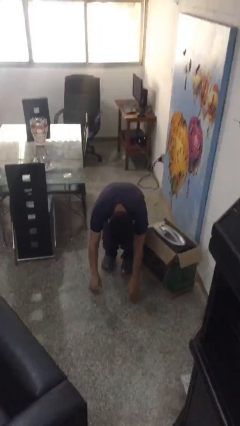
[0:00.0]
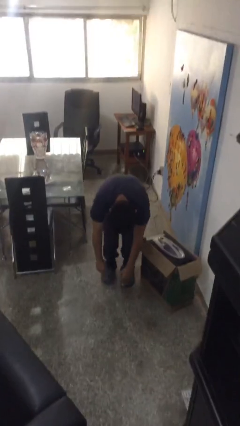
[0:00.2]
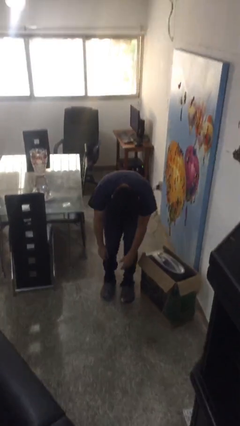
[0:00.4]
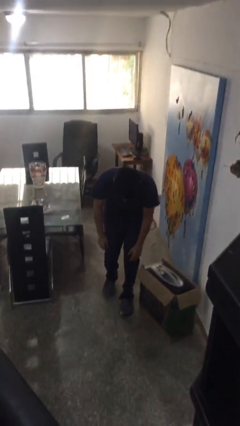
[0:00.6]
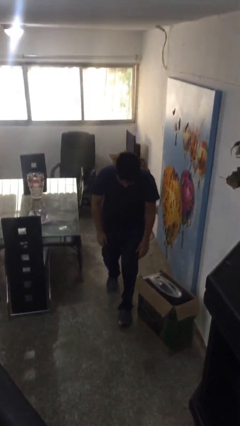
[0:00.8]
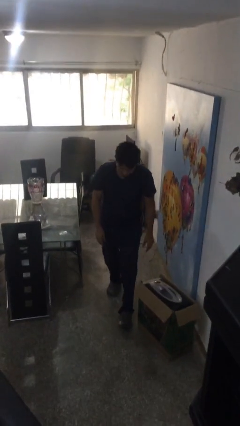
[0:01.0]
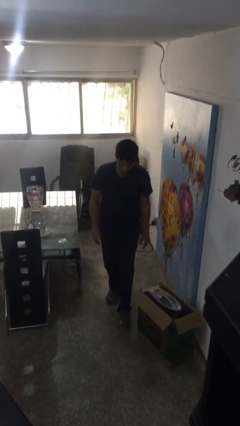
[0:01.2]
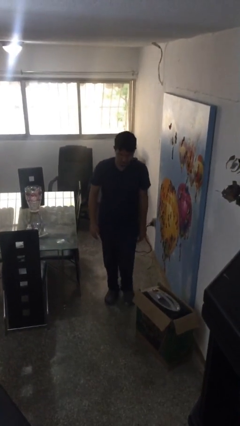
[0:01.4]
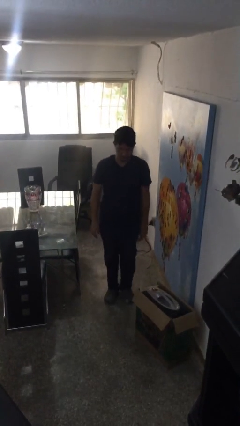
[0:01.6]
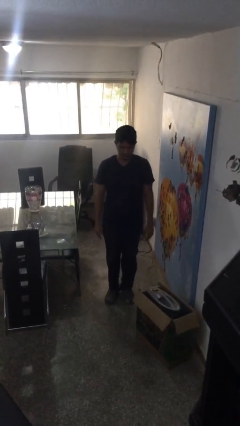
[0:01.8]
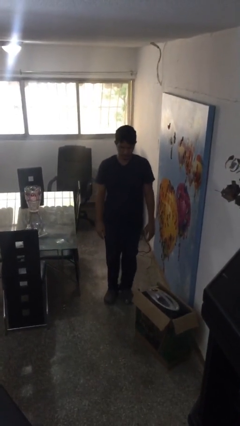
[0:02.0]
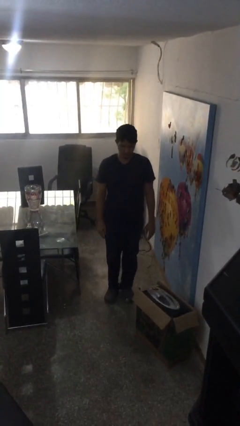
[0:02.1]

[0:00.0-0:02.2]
person stands up from floor

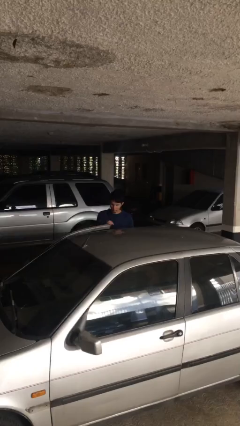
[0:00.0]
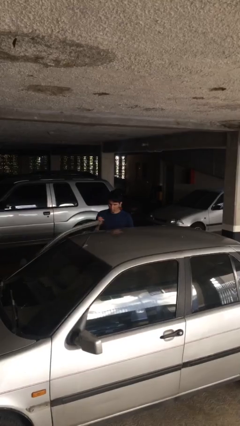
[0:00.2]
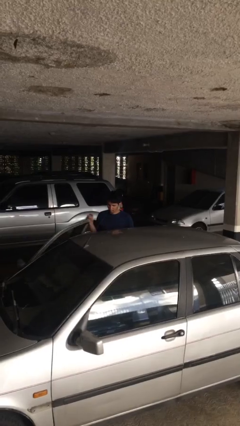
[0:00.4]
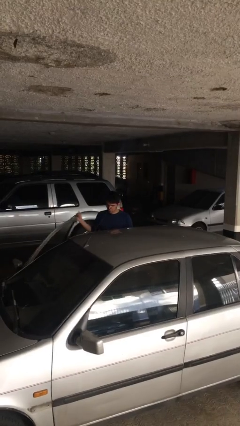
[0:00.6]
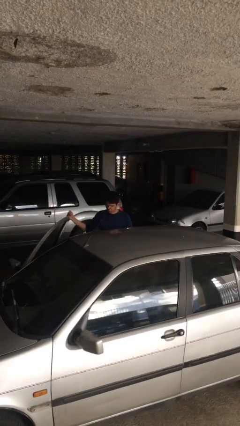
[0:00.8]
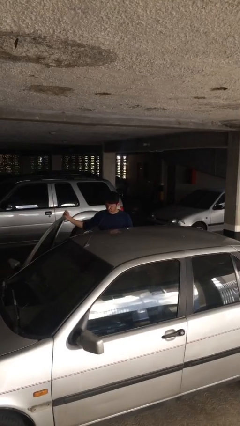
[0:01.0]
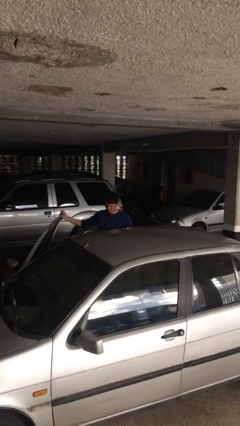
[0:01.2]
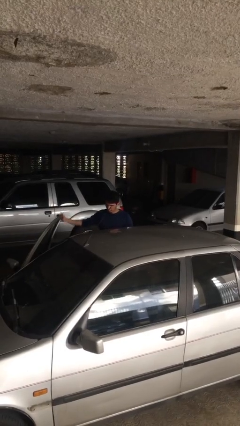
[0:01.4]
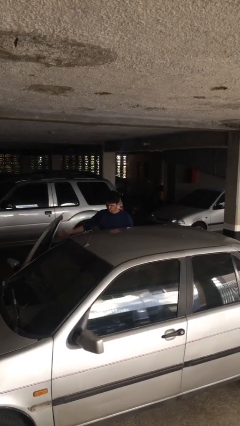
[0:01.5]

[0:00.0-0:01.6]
person opens car door

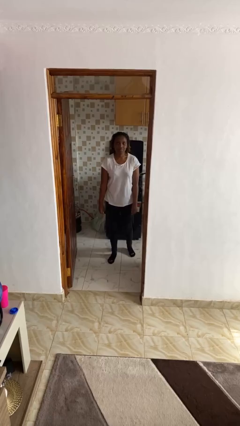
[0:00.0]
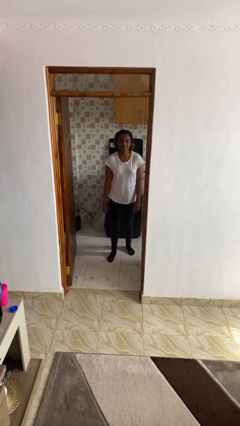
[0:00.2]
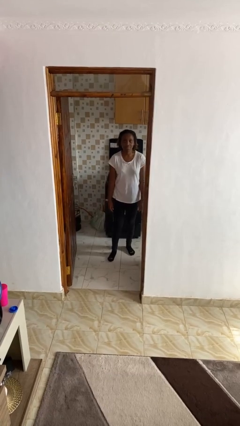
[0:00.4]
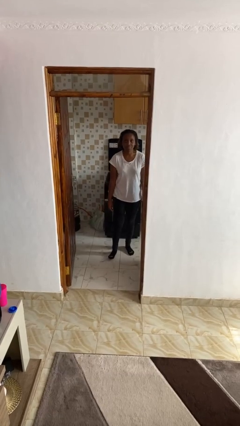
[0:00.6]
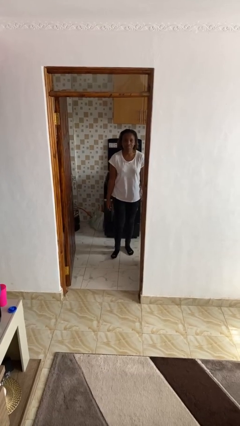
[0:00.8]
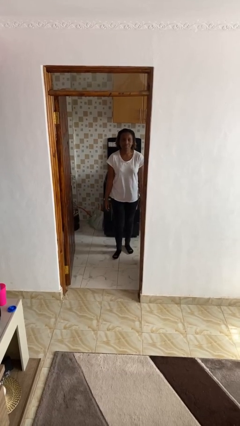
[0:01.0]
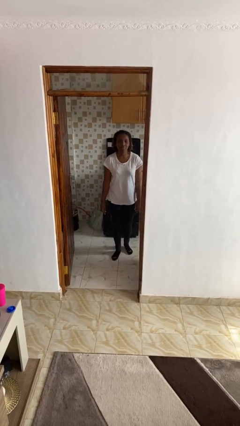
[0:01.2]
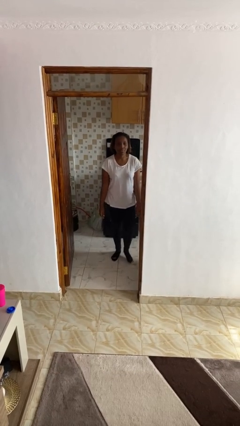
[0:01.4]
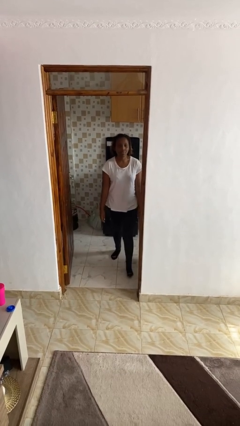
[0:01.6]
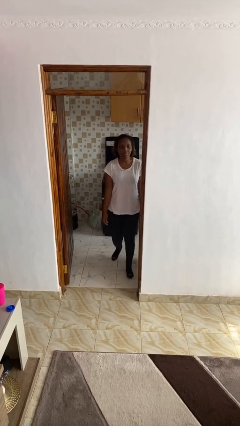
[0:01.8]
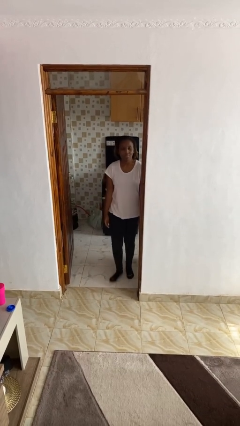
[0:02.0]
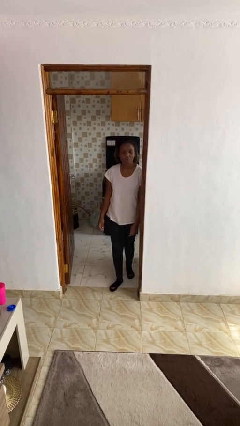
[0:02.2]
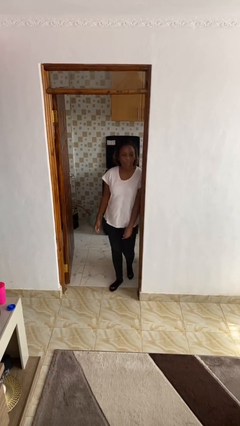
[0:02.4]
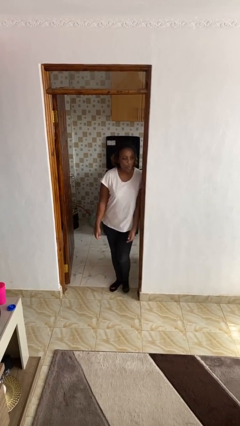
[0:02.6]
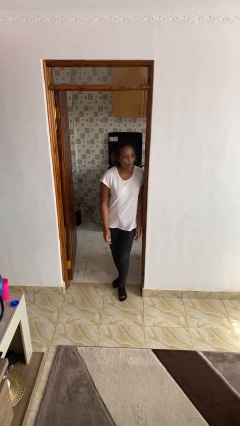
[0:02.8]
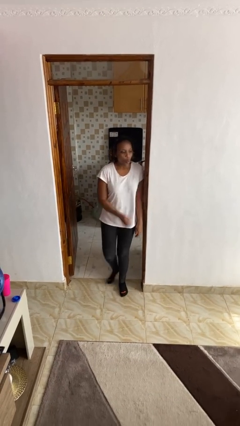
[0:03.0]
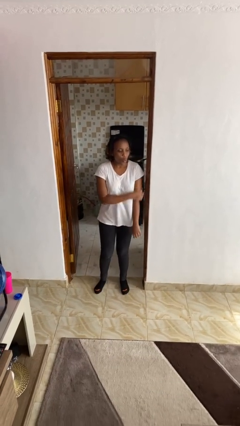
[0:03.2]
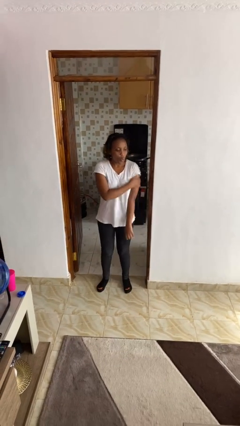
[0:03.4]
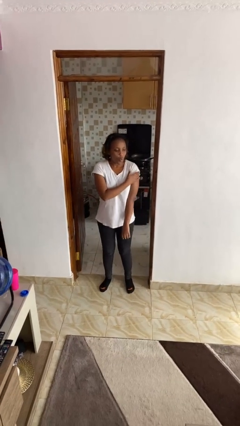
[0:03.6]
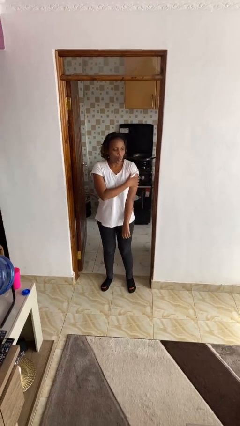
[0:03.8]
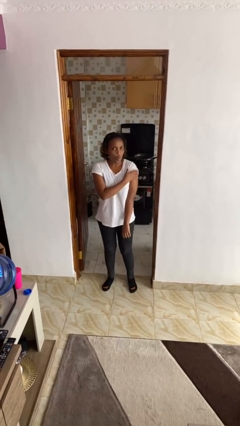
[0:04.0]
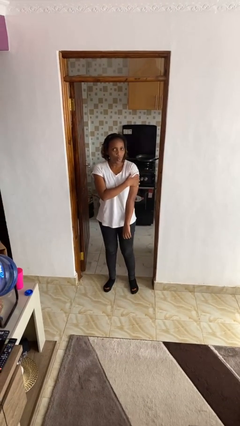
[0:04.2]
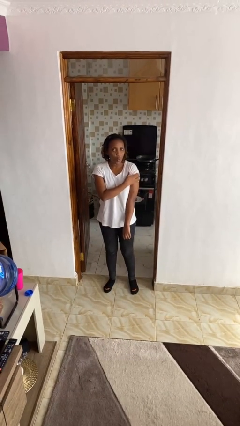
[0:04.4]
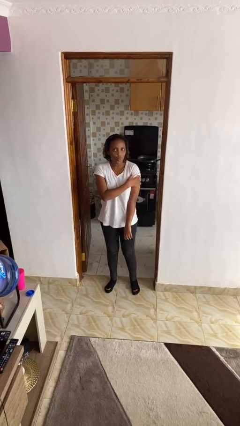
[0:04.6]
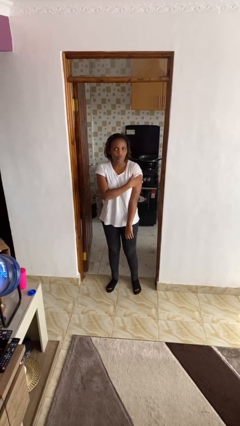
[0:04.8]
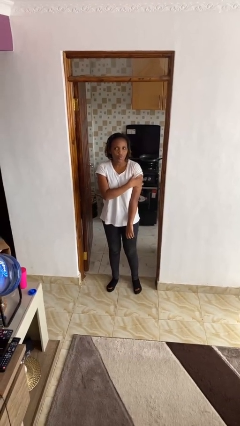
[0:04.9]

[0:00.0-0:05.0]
person bumps into wall

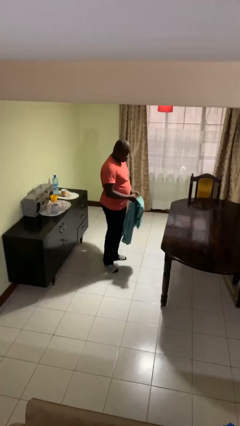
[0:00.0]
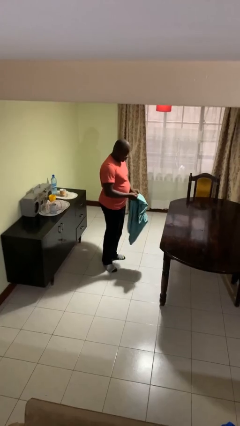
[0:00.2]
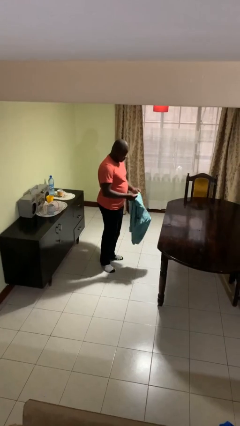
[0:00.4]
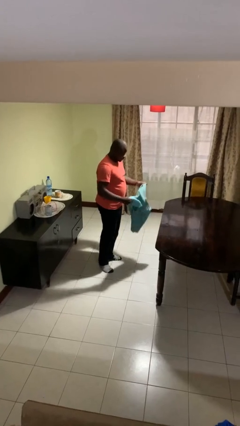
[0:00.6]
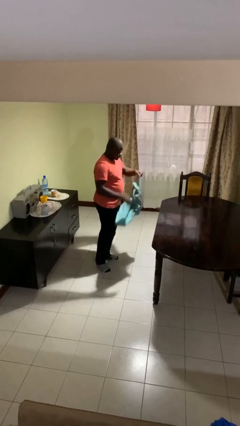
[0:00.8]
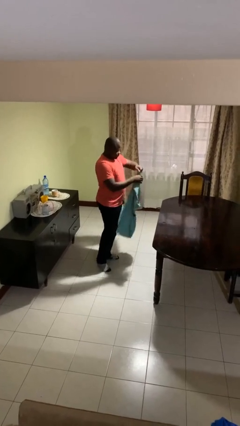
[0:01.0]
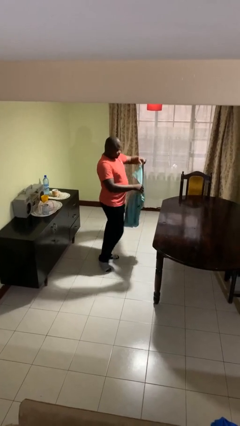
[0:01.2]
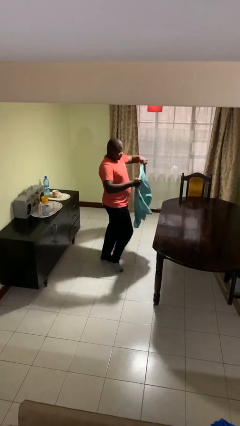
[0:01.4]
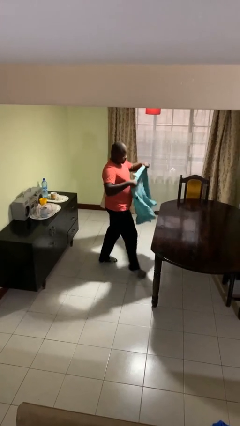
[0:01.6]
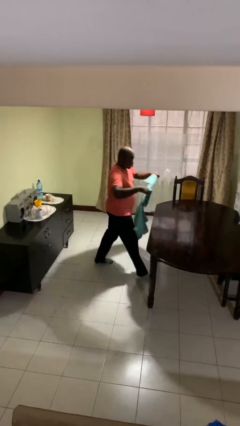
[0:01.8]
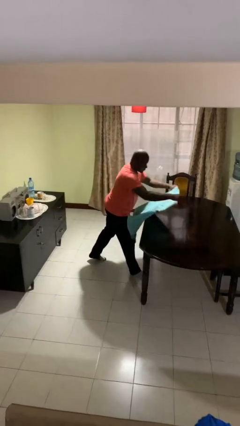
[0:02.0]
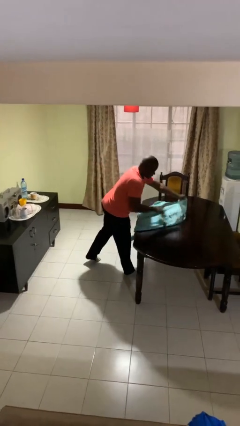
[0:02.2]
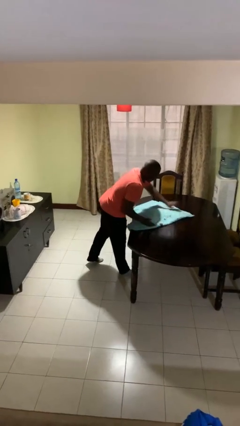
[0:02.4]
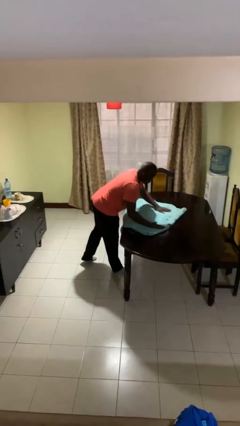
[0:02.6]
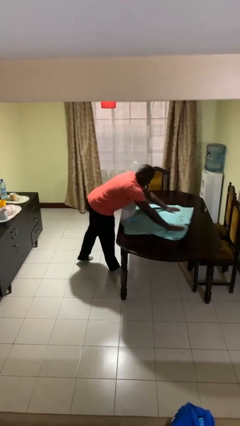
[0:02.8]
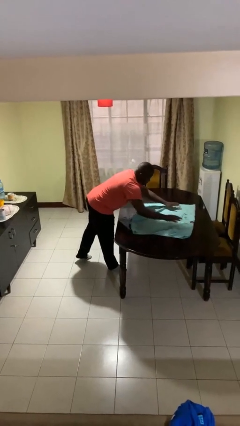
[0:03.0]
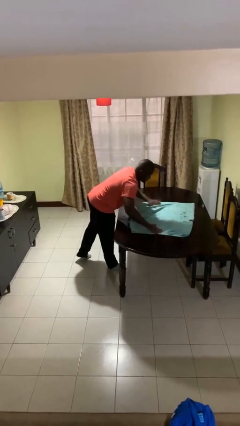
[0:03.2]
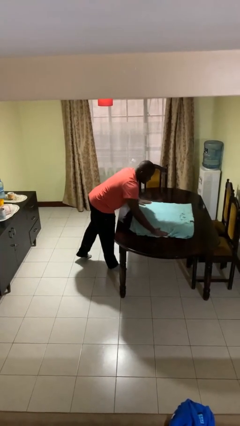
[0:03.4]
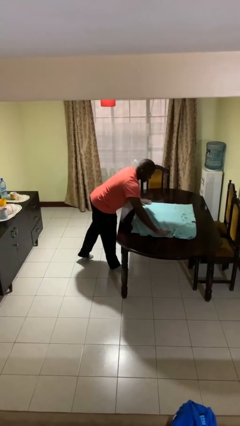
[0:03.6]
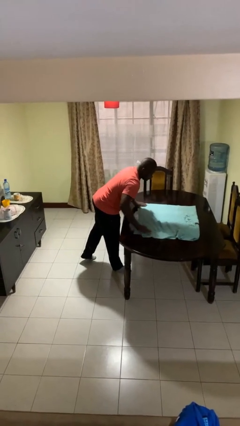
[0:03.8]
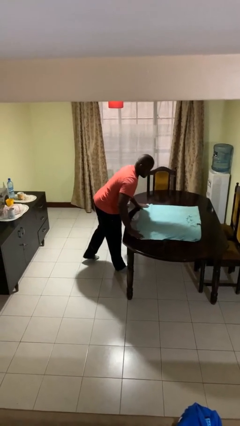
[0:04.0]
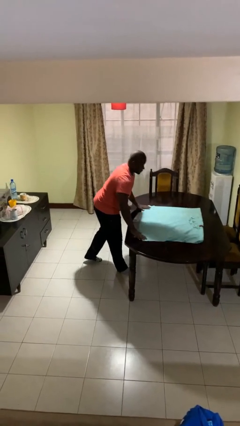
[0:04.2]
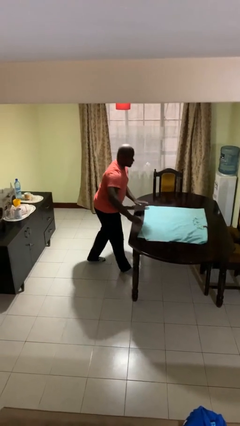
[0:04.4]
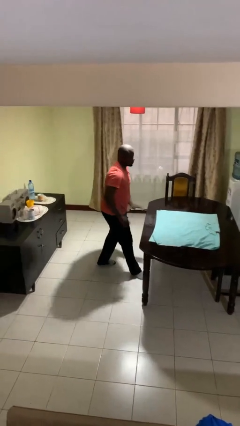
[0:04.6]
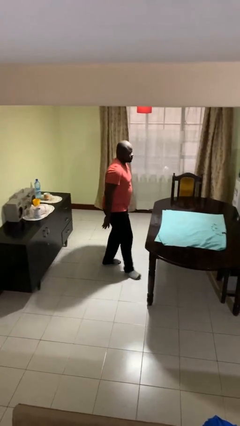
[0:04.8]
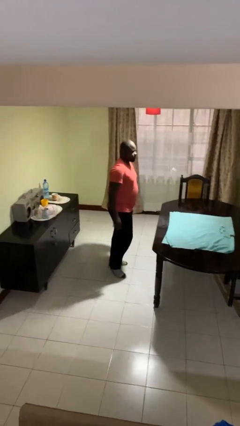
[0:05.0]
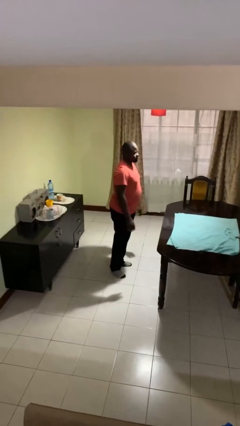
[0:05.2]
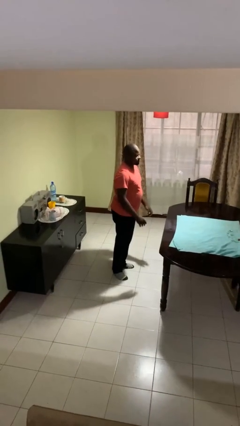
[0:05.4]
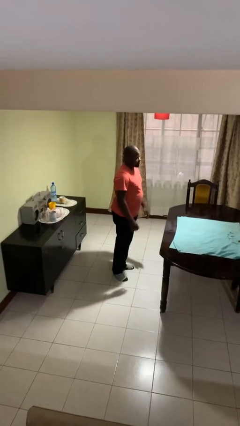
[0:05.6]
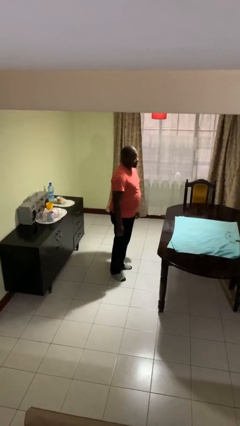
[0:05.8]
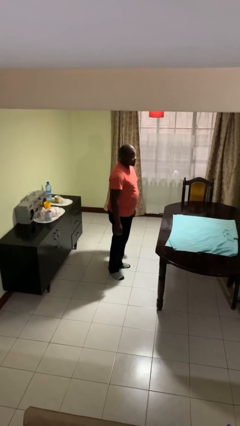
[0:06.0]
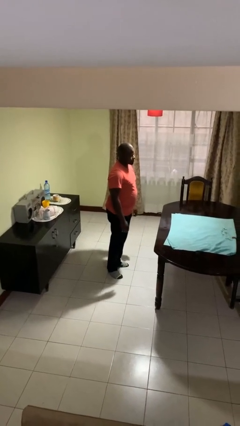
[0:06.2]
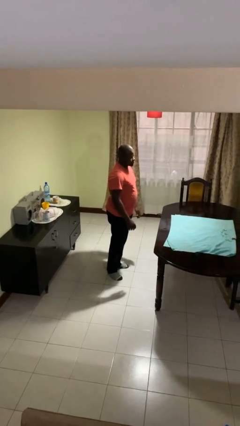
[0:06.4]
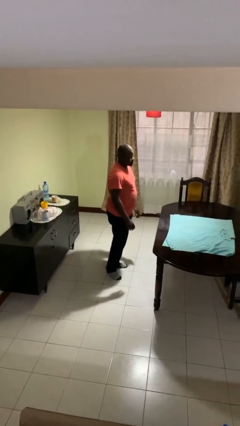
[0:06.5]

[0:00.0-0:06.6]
person spreads tablecloth

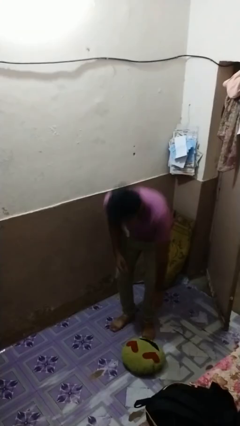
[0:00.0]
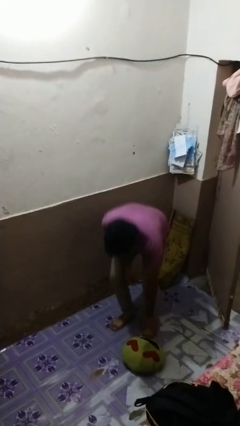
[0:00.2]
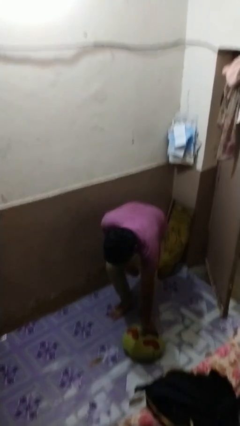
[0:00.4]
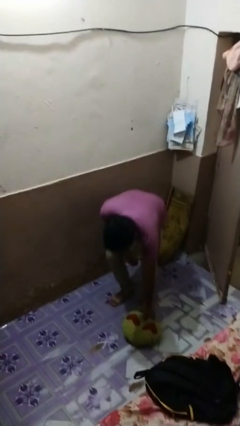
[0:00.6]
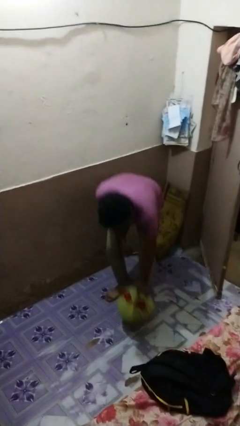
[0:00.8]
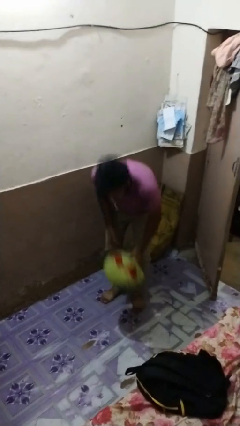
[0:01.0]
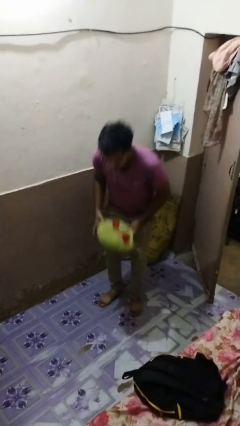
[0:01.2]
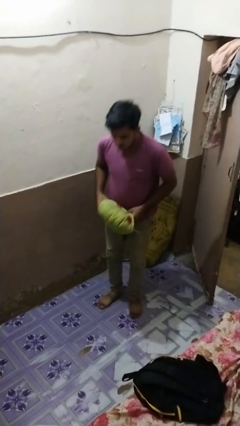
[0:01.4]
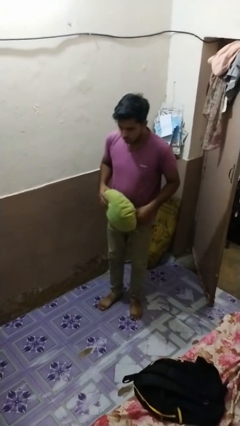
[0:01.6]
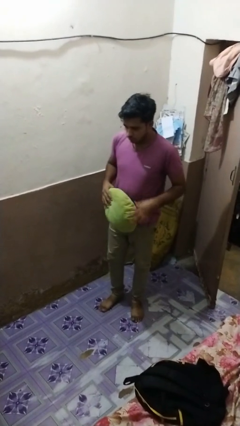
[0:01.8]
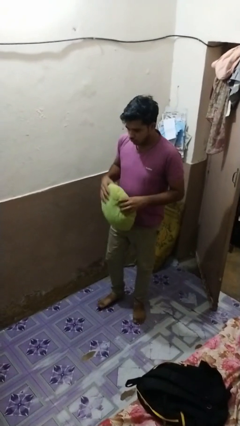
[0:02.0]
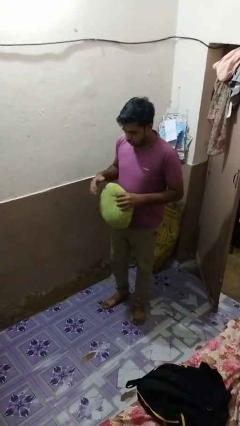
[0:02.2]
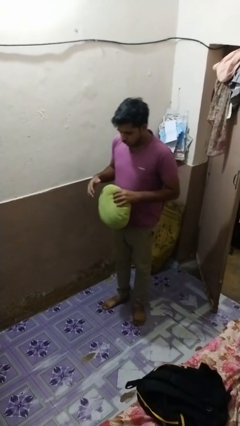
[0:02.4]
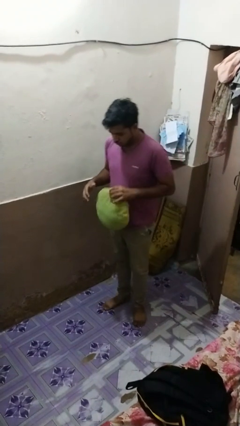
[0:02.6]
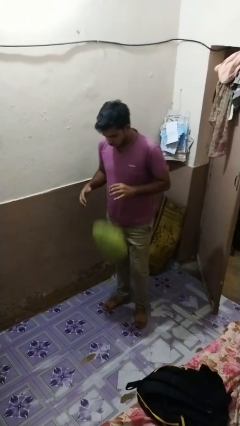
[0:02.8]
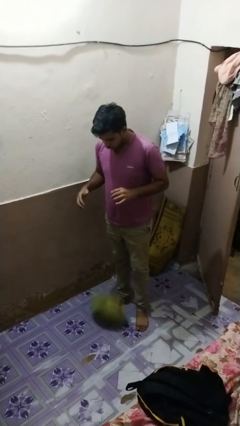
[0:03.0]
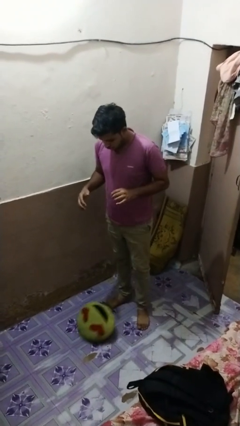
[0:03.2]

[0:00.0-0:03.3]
person picks up object from floor
